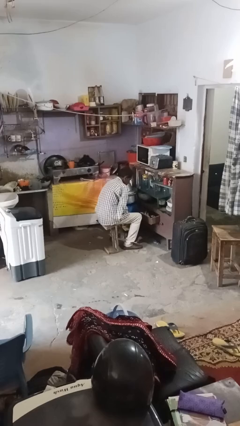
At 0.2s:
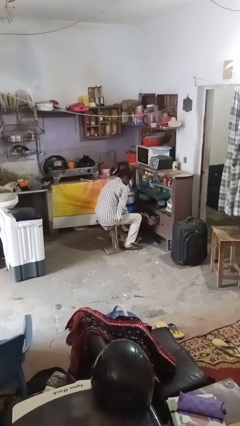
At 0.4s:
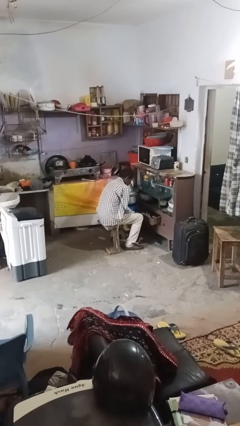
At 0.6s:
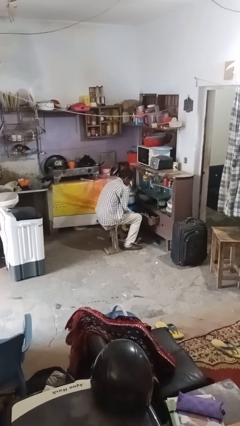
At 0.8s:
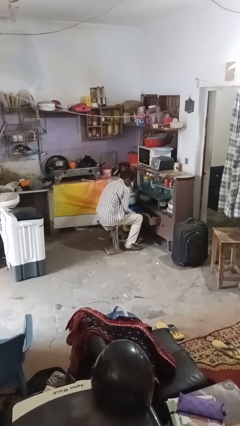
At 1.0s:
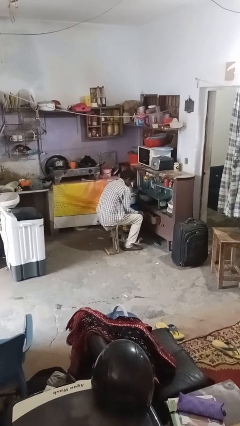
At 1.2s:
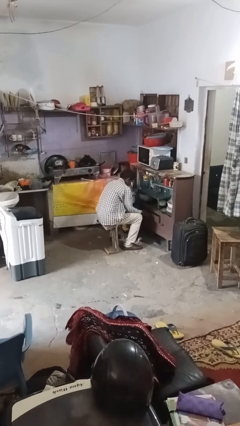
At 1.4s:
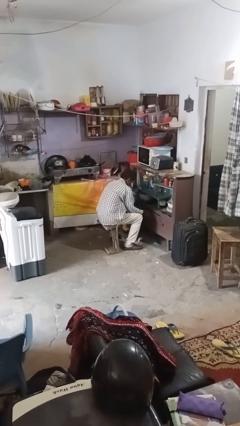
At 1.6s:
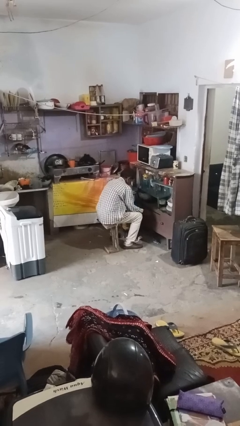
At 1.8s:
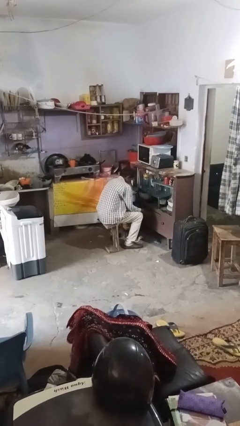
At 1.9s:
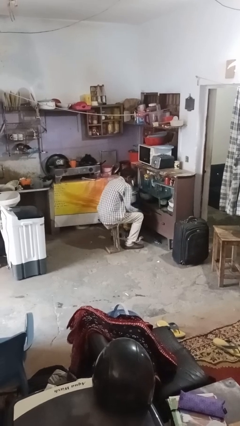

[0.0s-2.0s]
person closes kitchen drawer

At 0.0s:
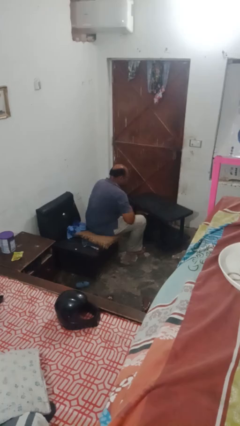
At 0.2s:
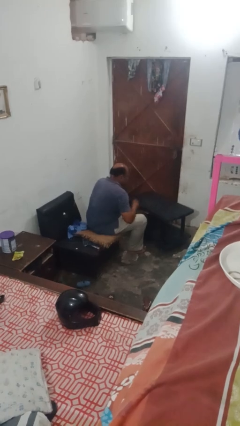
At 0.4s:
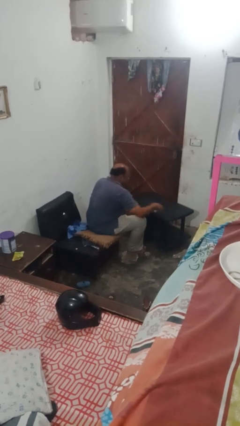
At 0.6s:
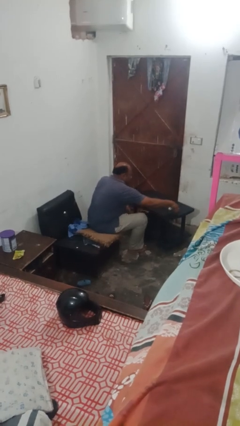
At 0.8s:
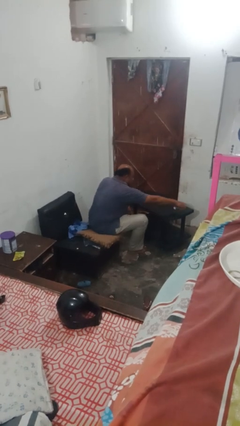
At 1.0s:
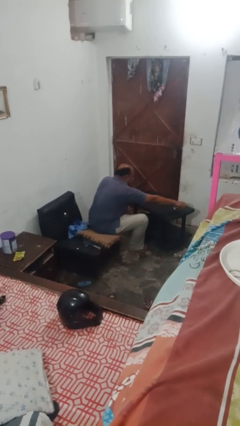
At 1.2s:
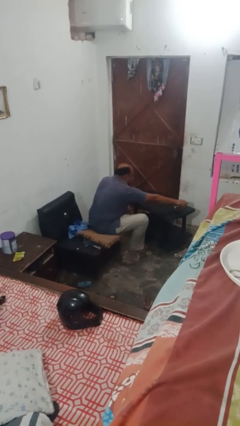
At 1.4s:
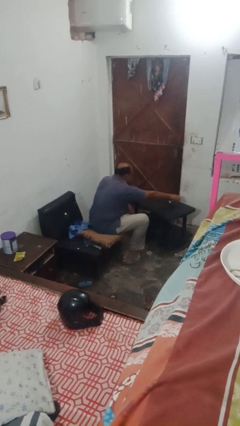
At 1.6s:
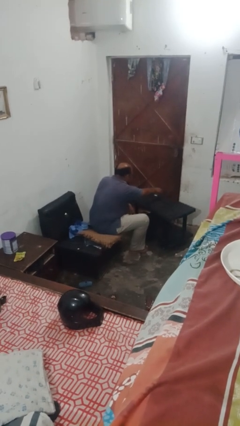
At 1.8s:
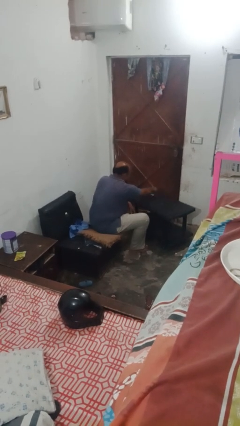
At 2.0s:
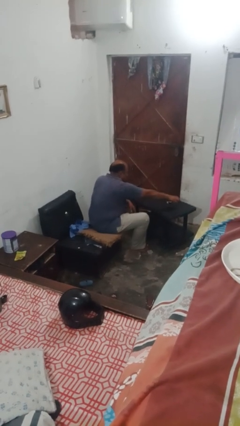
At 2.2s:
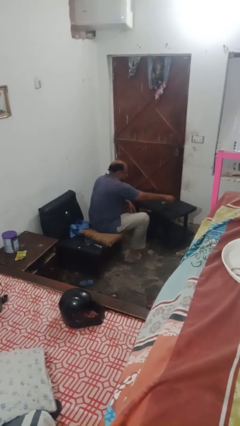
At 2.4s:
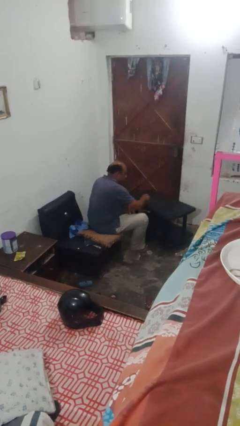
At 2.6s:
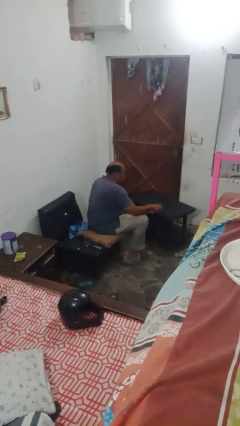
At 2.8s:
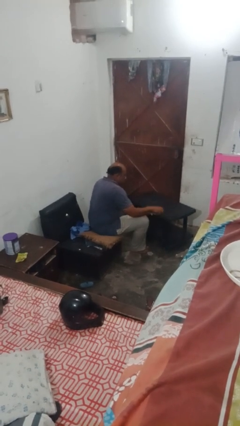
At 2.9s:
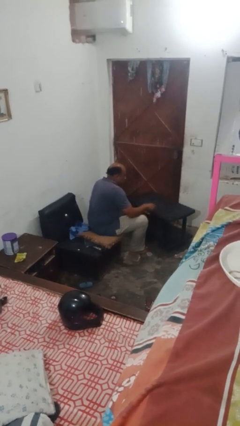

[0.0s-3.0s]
person sprays from bottle

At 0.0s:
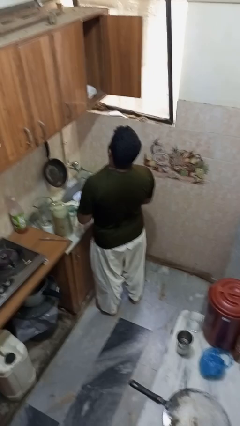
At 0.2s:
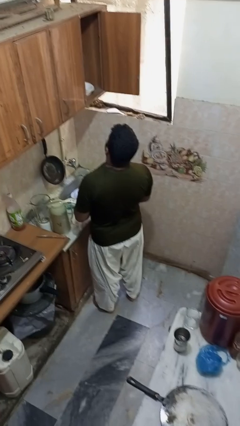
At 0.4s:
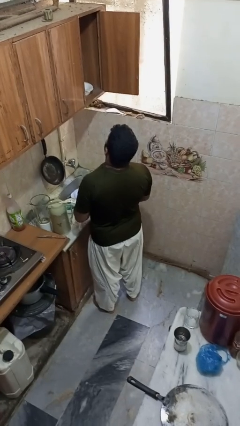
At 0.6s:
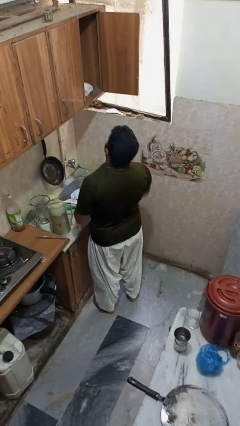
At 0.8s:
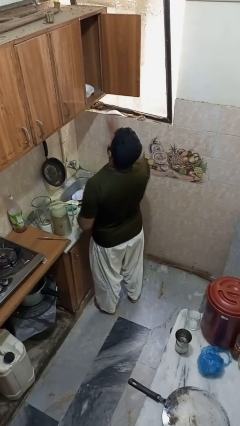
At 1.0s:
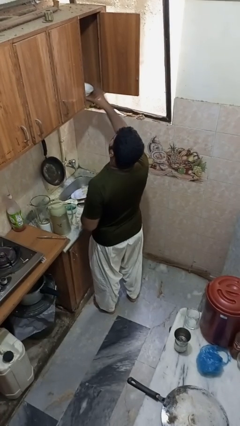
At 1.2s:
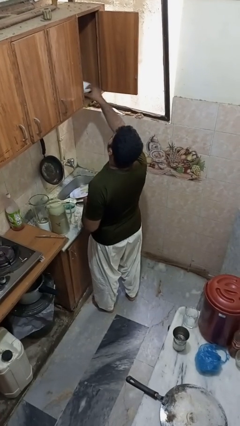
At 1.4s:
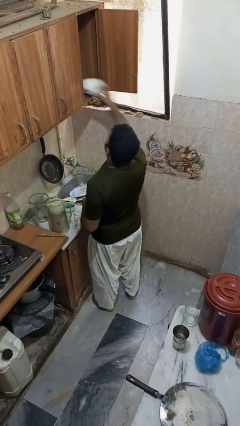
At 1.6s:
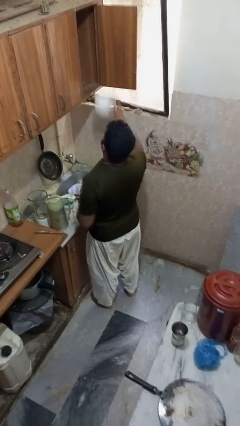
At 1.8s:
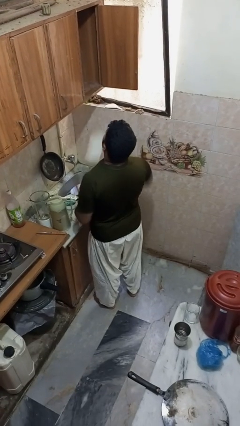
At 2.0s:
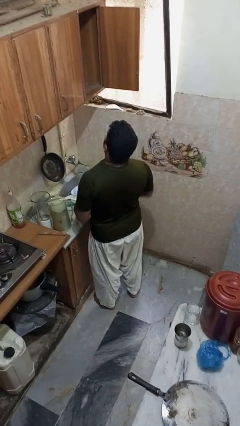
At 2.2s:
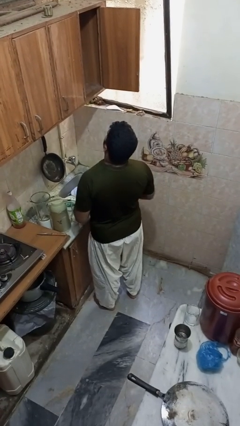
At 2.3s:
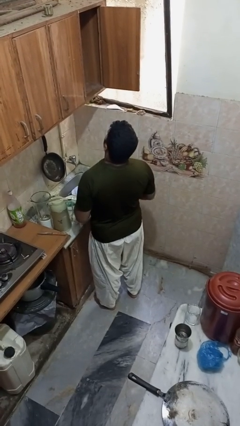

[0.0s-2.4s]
person takes object from cabinet

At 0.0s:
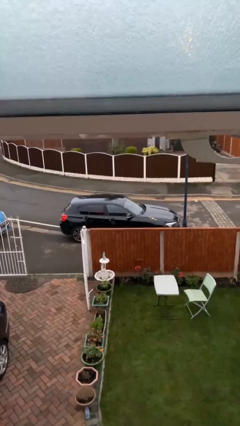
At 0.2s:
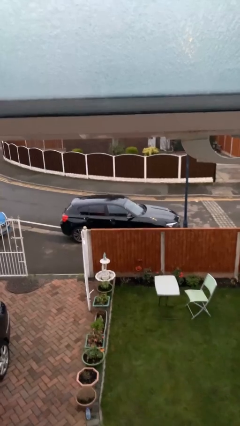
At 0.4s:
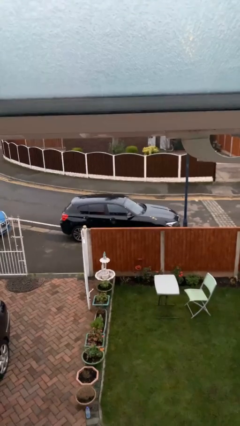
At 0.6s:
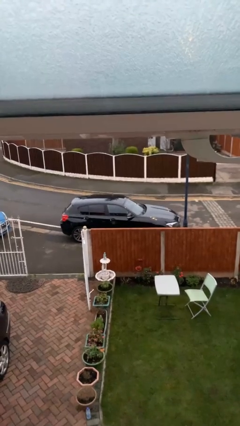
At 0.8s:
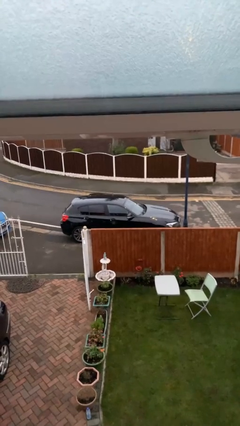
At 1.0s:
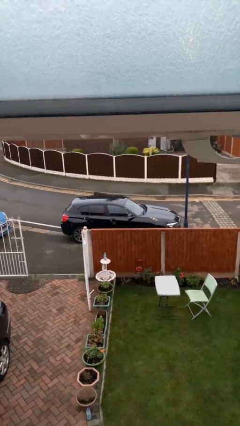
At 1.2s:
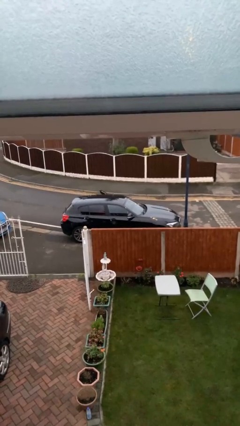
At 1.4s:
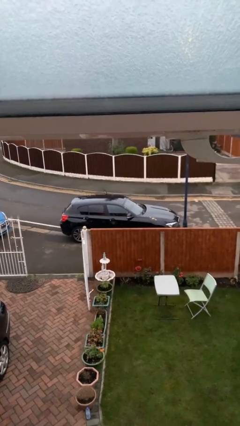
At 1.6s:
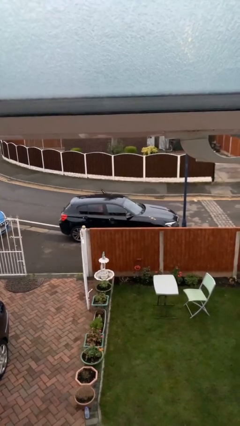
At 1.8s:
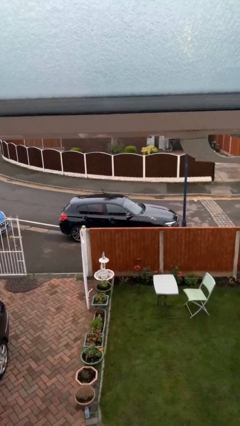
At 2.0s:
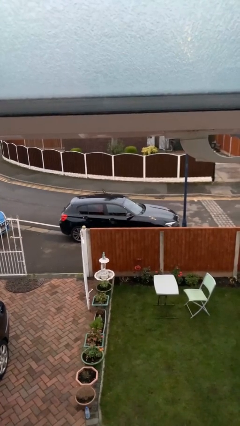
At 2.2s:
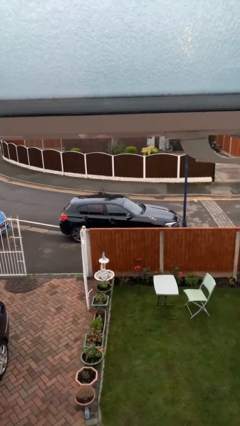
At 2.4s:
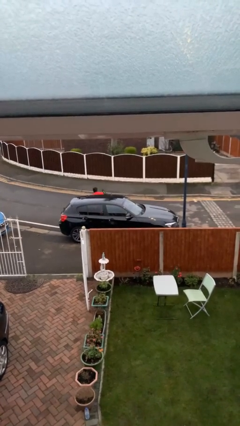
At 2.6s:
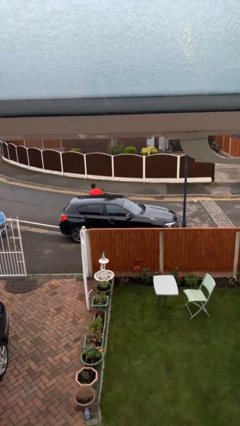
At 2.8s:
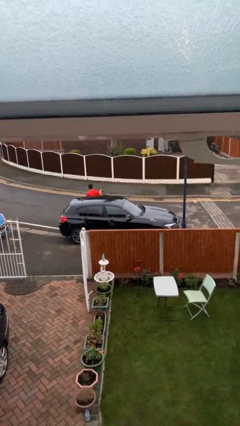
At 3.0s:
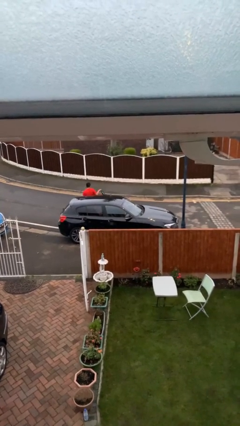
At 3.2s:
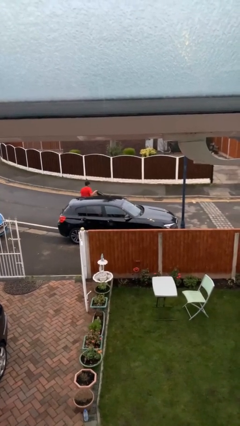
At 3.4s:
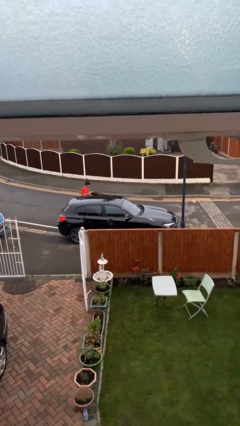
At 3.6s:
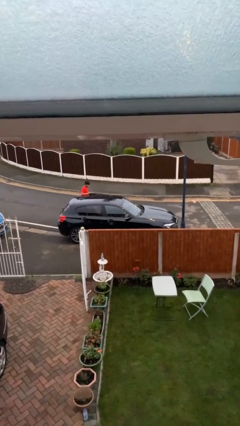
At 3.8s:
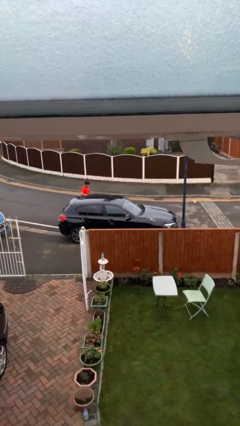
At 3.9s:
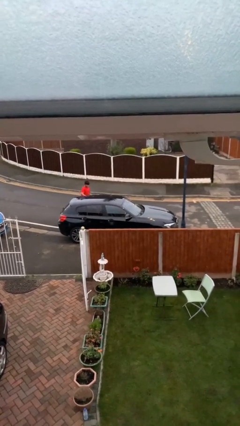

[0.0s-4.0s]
car drops off person

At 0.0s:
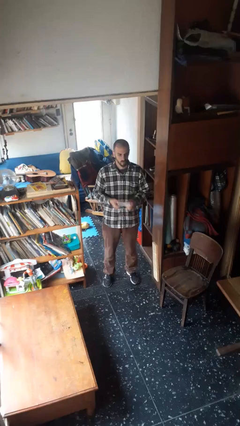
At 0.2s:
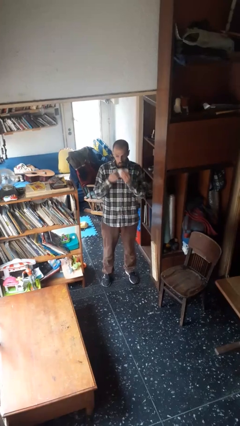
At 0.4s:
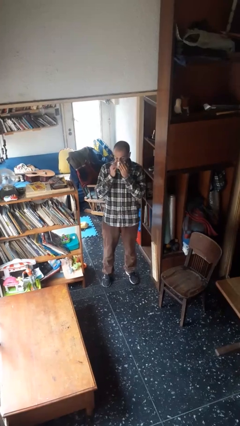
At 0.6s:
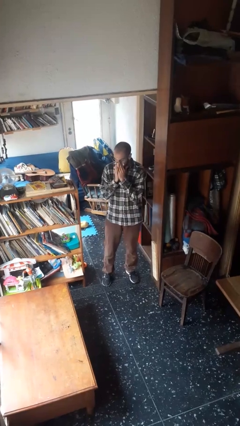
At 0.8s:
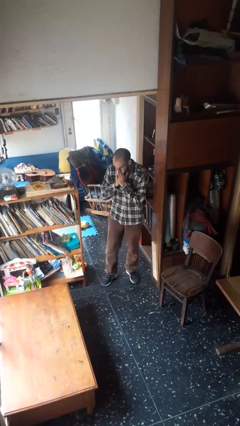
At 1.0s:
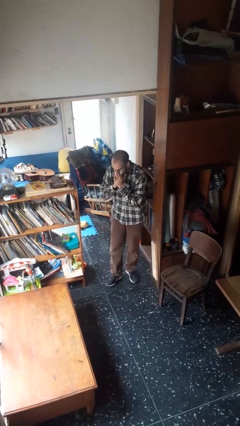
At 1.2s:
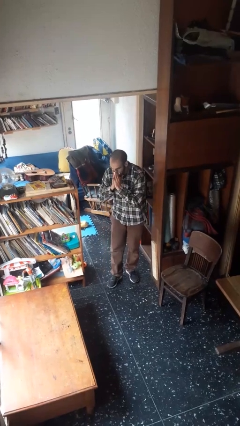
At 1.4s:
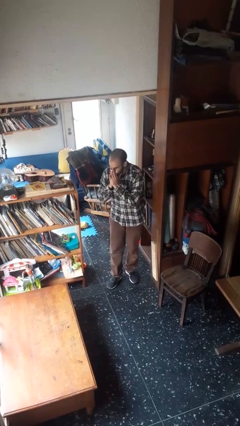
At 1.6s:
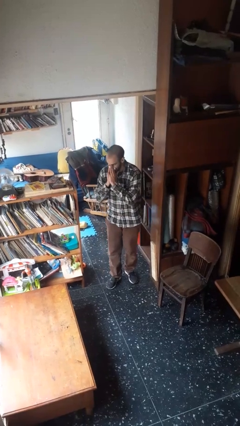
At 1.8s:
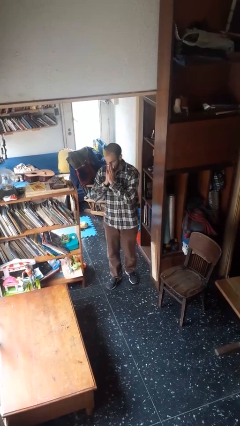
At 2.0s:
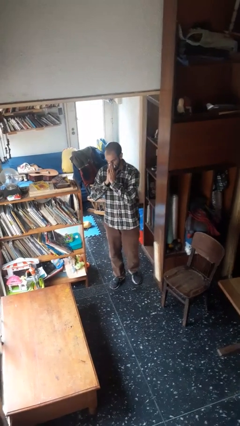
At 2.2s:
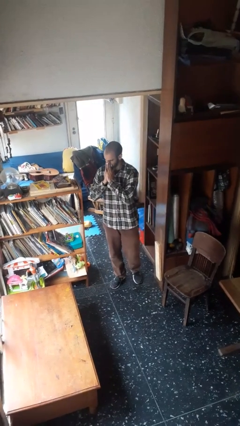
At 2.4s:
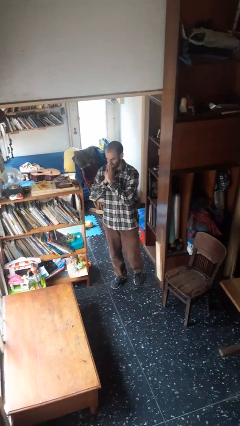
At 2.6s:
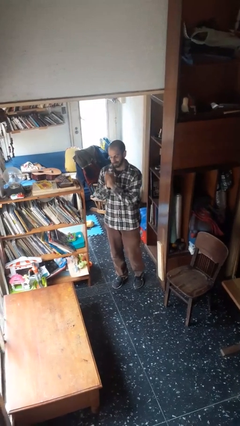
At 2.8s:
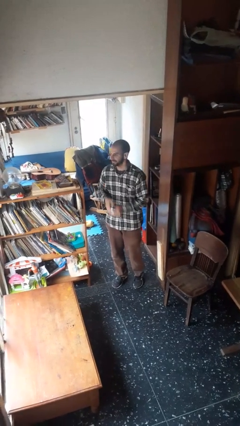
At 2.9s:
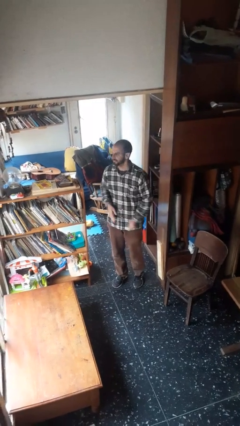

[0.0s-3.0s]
person blows nose

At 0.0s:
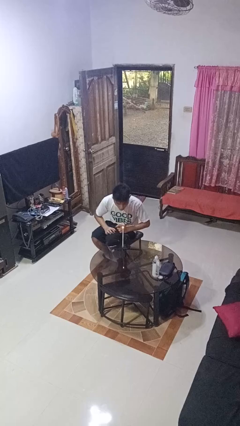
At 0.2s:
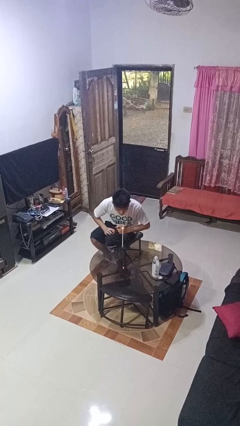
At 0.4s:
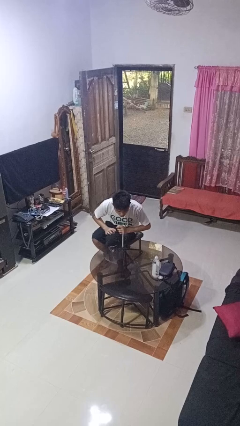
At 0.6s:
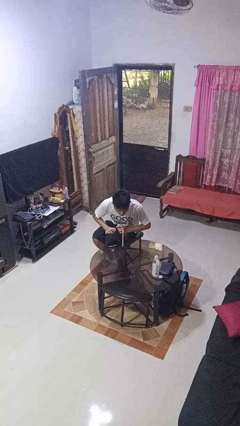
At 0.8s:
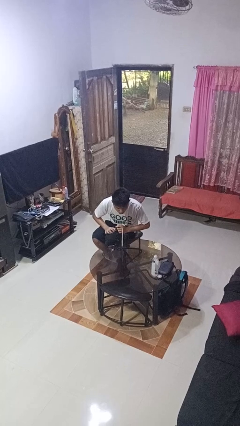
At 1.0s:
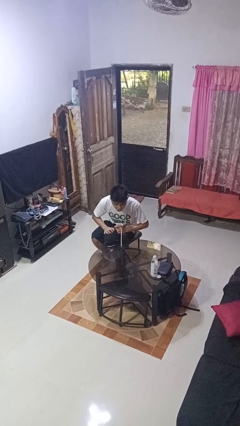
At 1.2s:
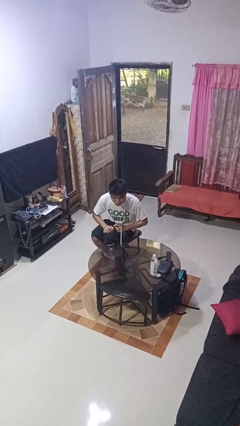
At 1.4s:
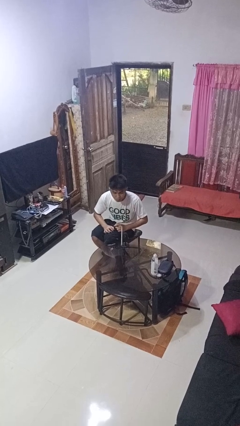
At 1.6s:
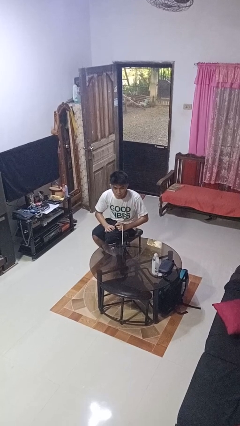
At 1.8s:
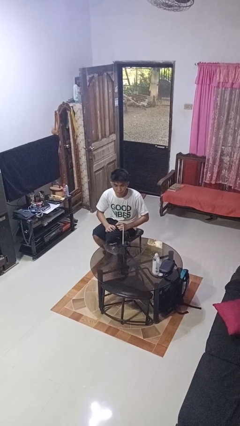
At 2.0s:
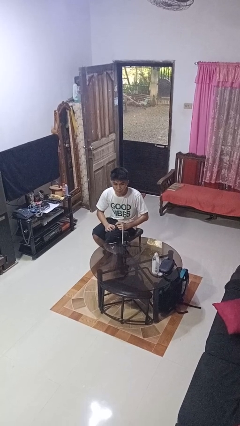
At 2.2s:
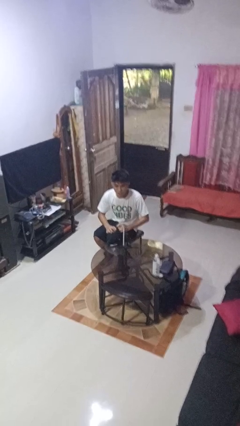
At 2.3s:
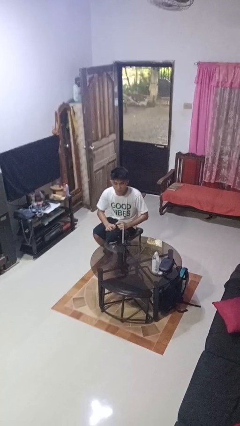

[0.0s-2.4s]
person extinguishes candle

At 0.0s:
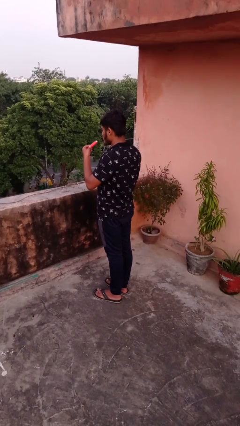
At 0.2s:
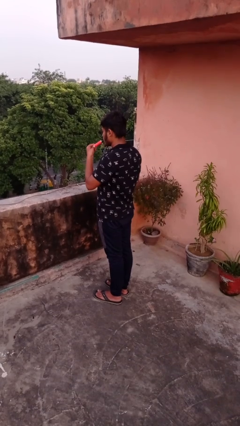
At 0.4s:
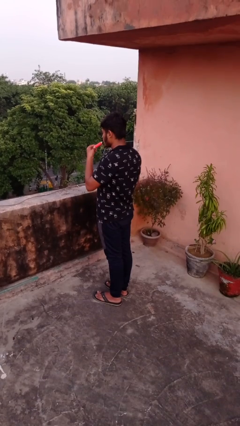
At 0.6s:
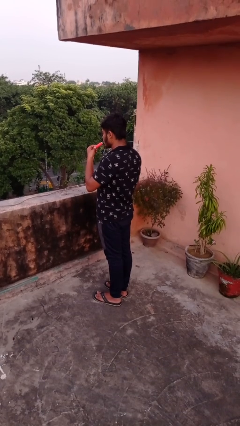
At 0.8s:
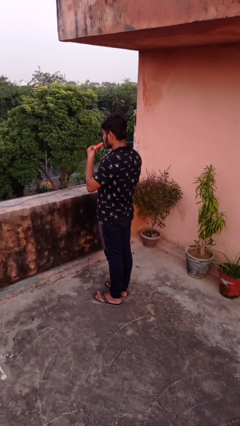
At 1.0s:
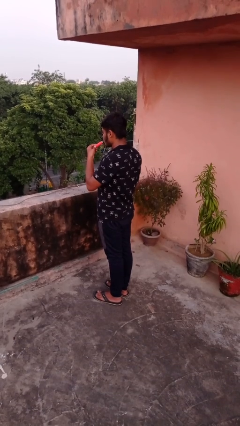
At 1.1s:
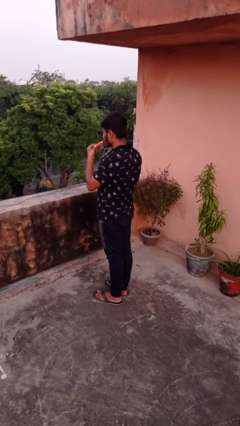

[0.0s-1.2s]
person vapes
